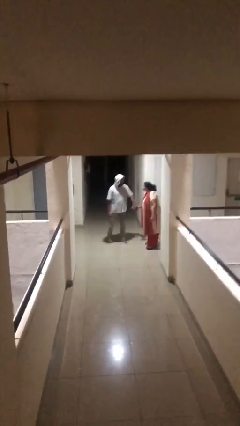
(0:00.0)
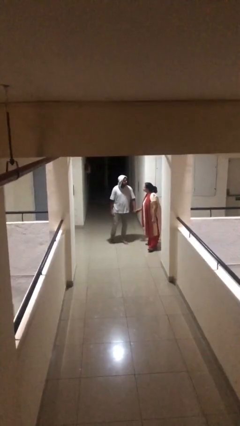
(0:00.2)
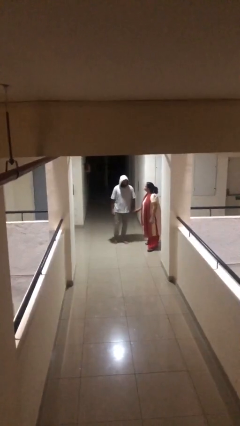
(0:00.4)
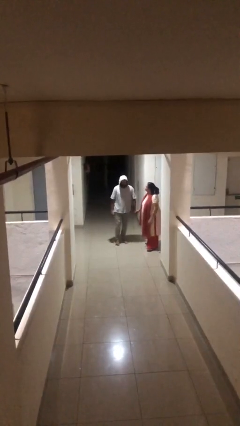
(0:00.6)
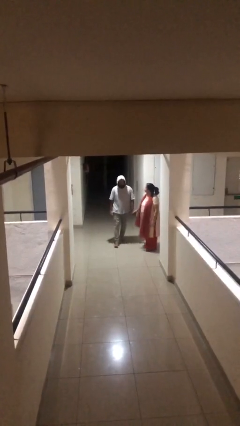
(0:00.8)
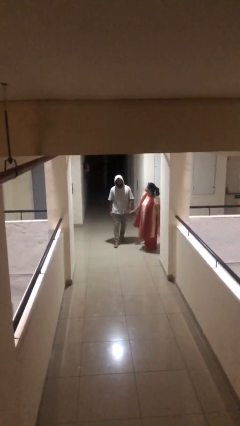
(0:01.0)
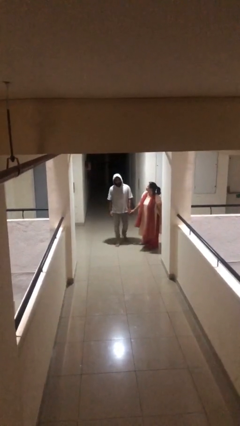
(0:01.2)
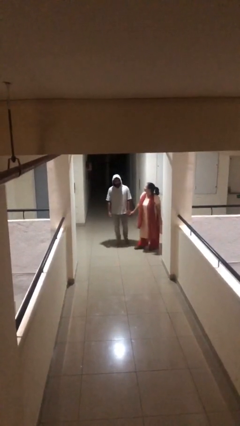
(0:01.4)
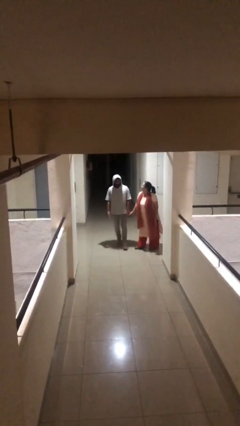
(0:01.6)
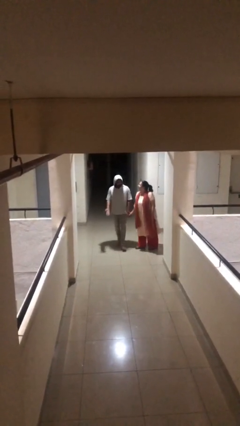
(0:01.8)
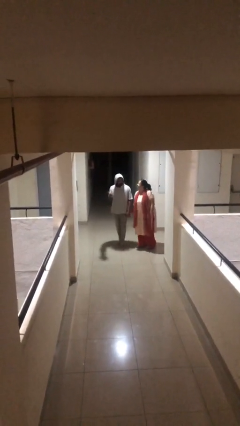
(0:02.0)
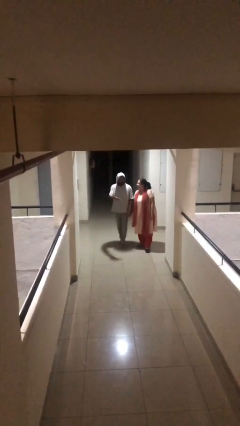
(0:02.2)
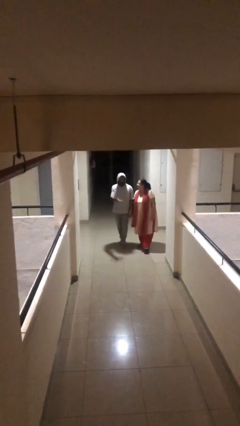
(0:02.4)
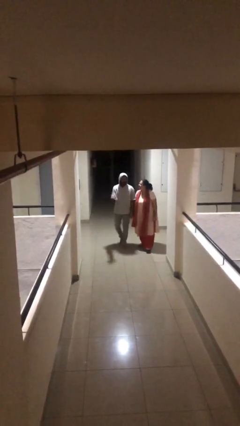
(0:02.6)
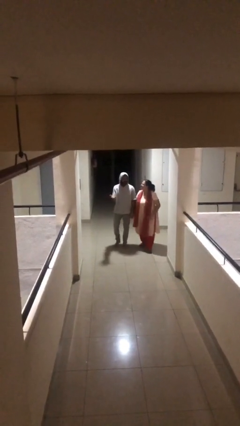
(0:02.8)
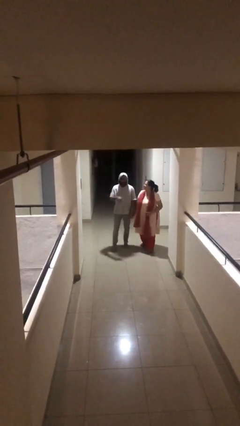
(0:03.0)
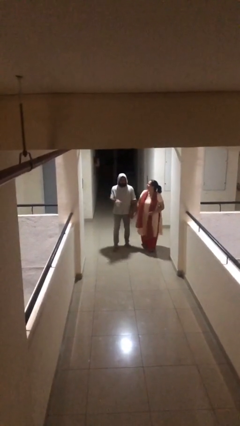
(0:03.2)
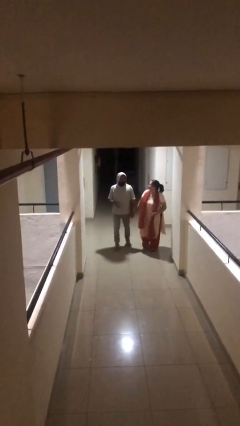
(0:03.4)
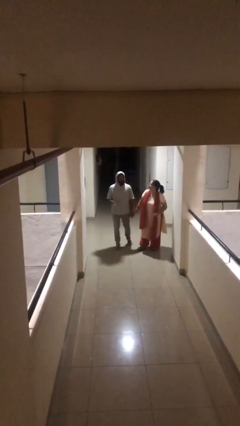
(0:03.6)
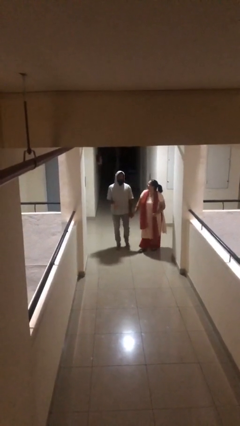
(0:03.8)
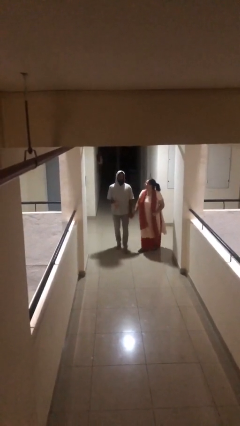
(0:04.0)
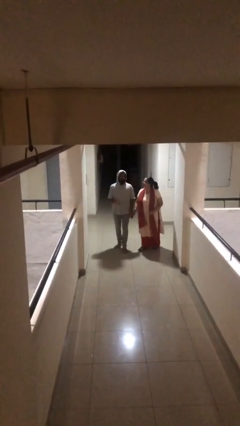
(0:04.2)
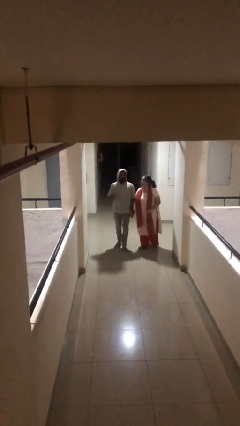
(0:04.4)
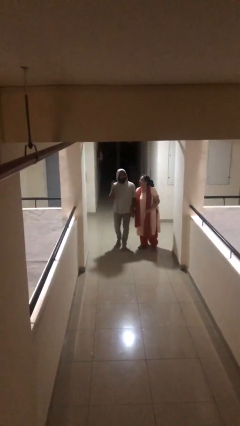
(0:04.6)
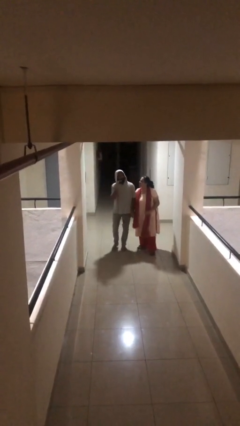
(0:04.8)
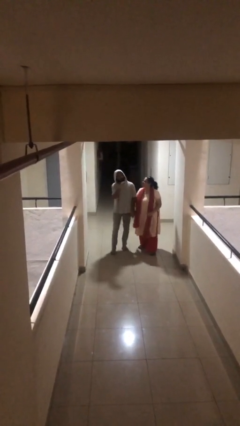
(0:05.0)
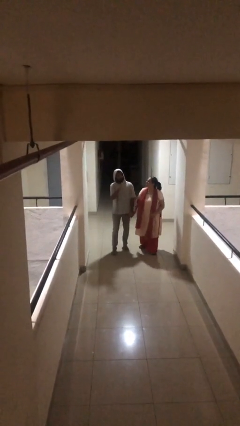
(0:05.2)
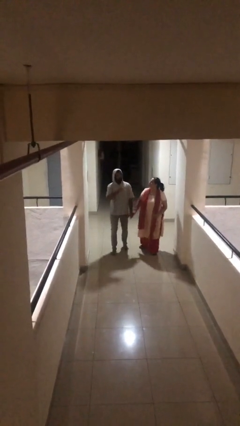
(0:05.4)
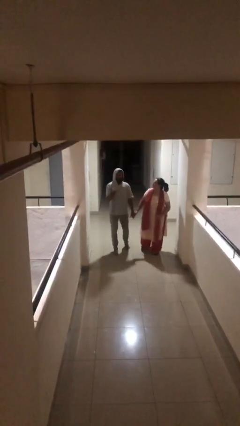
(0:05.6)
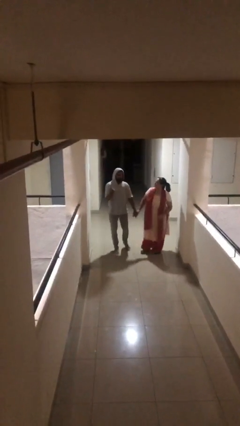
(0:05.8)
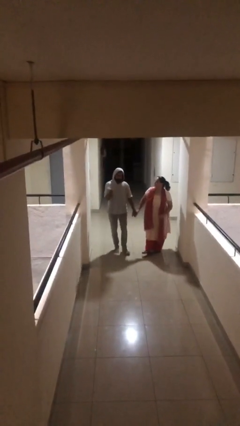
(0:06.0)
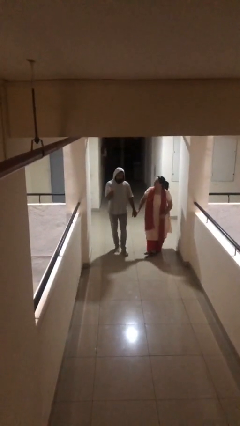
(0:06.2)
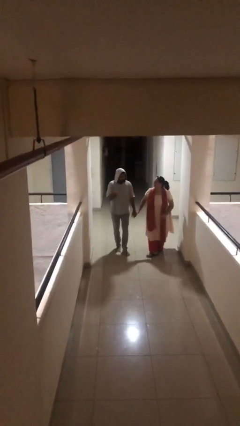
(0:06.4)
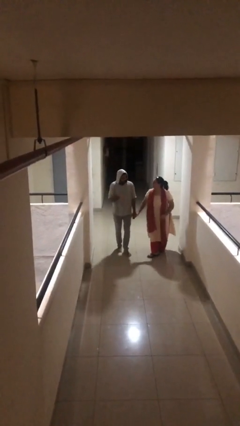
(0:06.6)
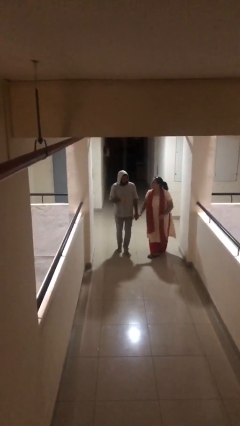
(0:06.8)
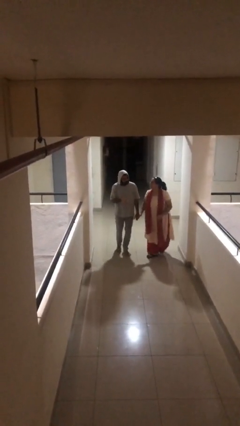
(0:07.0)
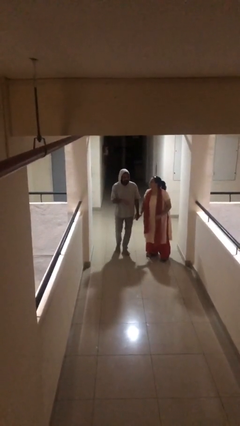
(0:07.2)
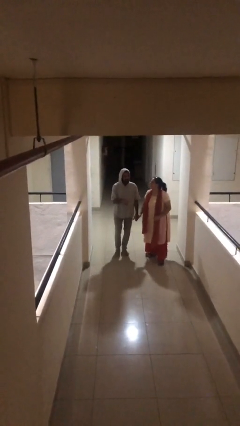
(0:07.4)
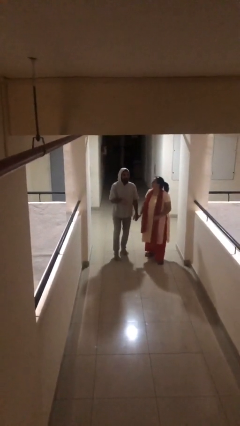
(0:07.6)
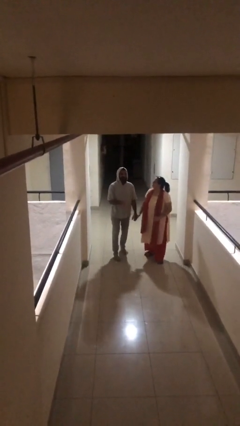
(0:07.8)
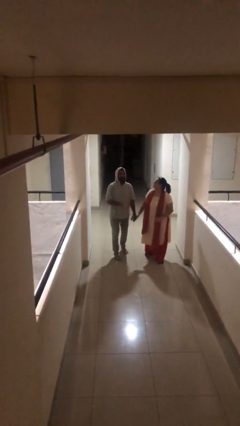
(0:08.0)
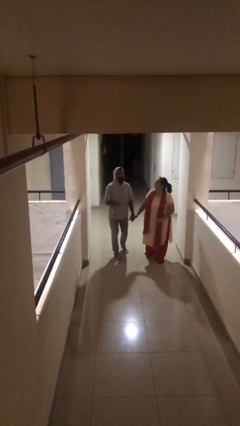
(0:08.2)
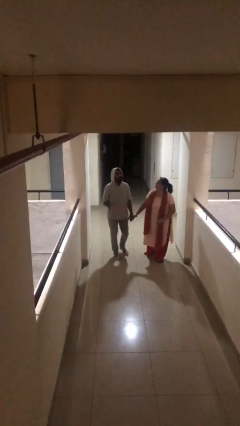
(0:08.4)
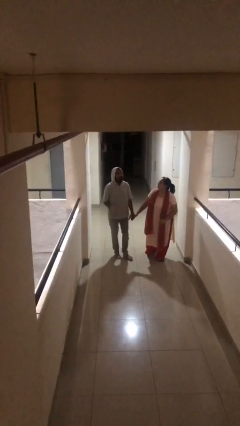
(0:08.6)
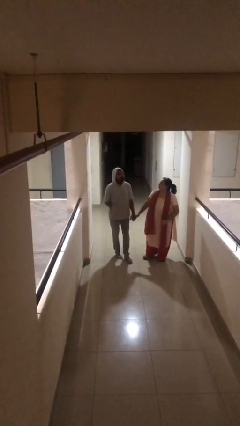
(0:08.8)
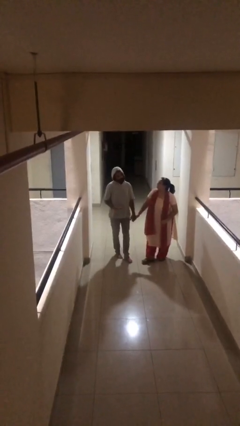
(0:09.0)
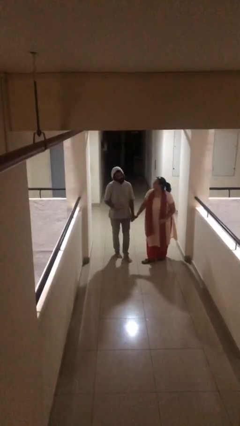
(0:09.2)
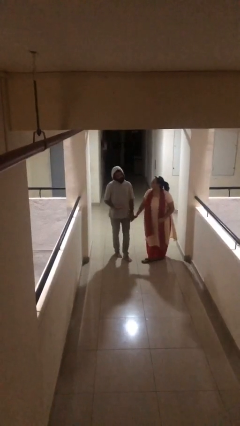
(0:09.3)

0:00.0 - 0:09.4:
person holds hand

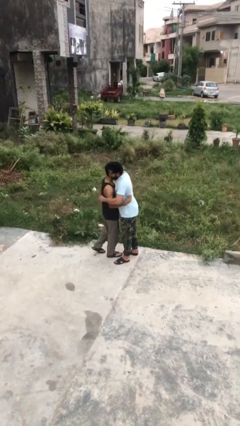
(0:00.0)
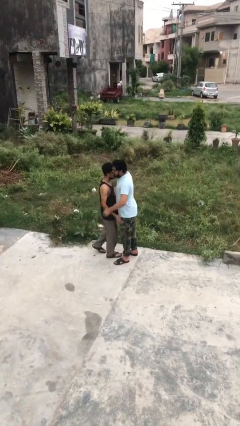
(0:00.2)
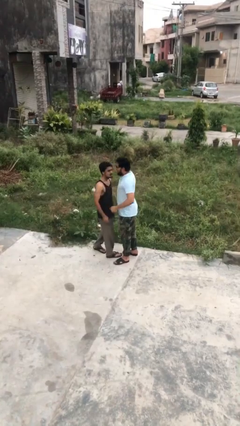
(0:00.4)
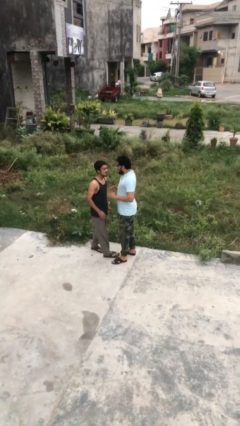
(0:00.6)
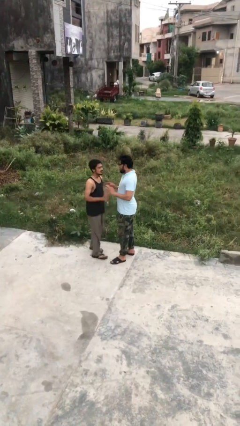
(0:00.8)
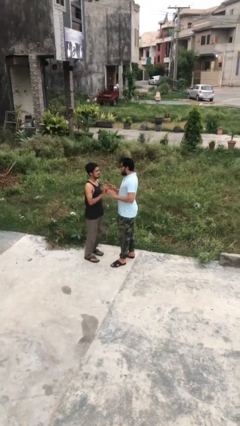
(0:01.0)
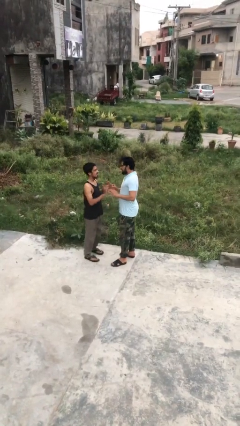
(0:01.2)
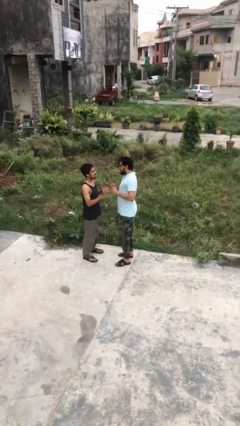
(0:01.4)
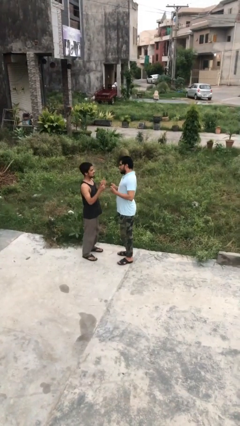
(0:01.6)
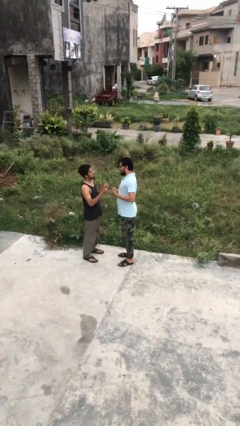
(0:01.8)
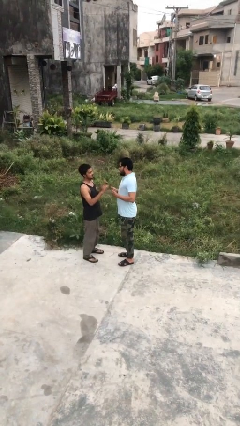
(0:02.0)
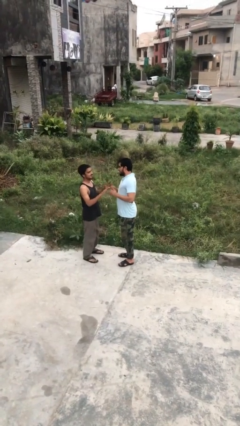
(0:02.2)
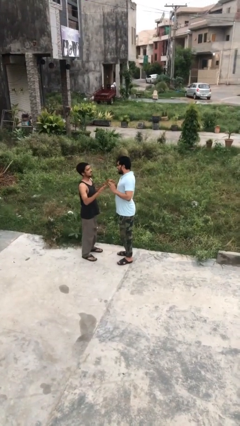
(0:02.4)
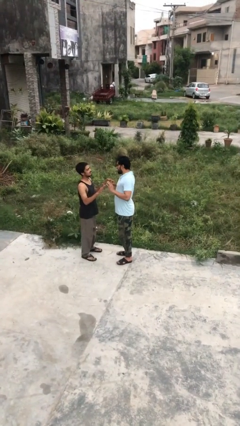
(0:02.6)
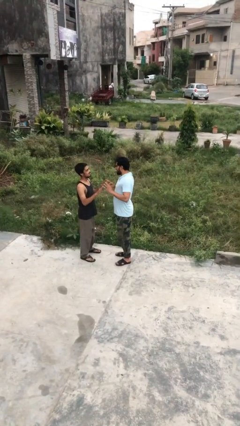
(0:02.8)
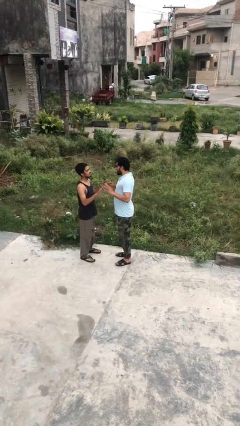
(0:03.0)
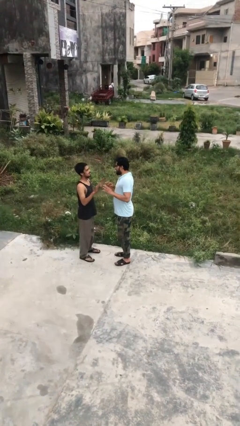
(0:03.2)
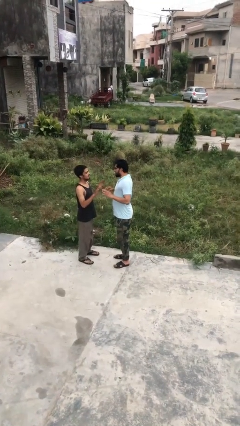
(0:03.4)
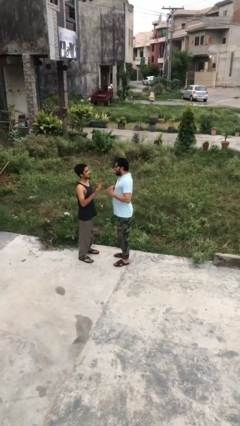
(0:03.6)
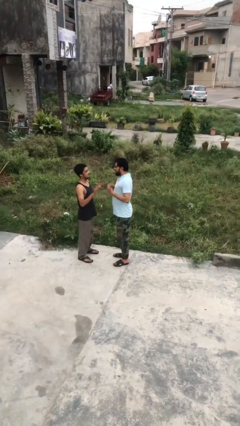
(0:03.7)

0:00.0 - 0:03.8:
person talks to person

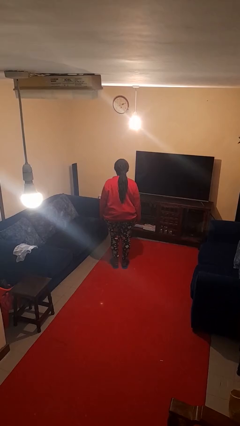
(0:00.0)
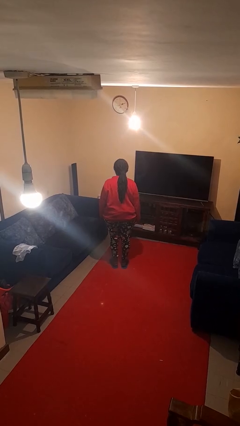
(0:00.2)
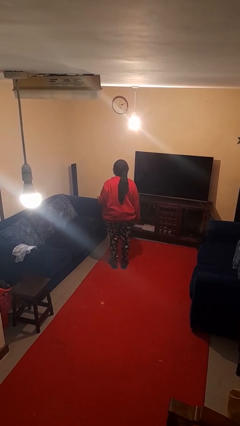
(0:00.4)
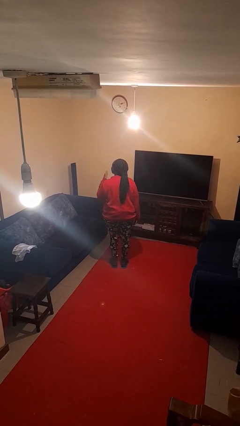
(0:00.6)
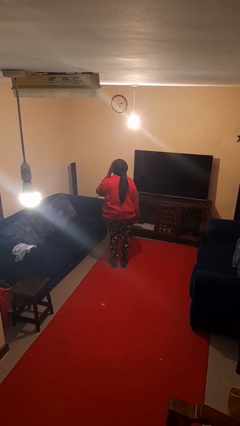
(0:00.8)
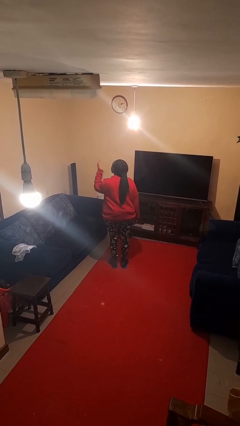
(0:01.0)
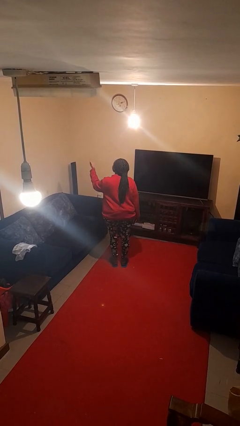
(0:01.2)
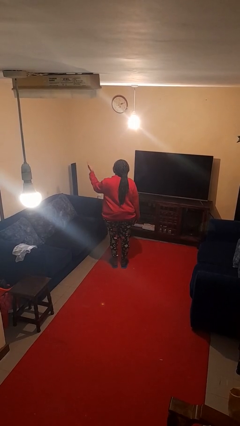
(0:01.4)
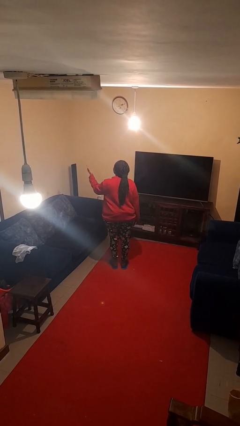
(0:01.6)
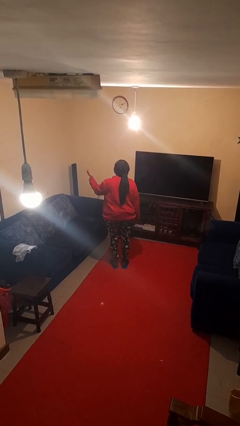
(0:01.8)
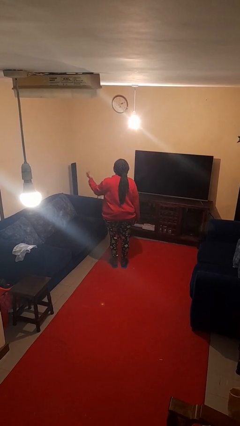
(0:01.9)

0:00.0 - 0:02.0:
person gestures blow kiss

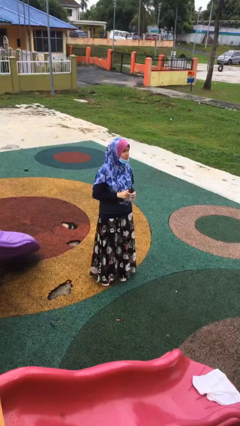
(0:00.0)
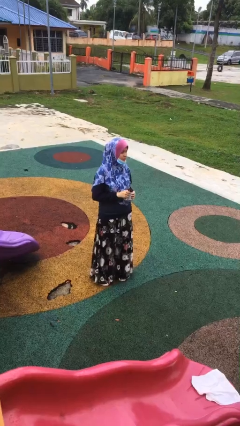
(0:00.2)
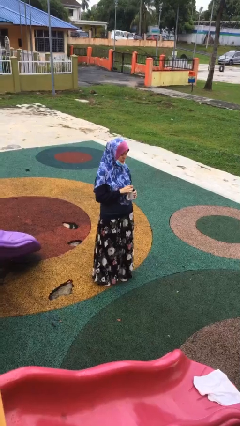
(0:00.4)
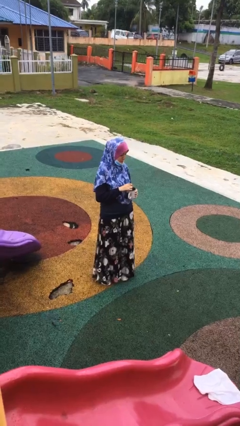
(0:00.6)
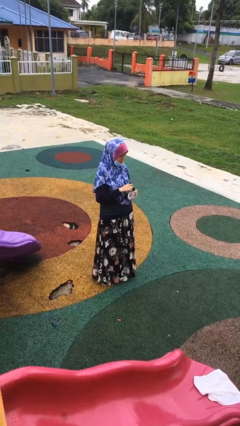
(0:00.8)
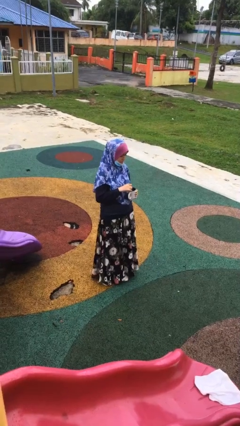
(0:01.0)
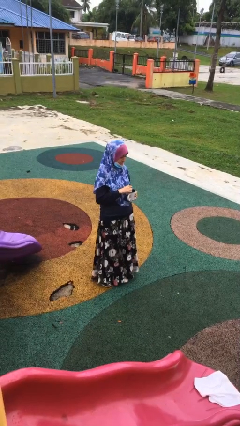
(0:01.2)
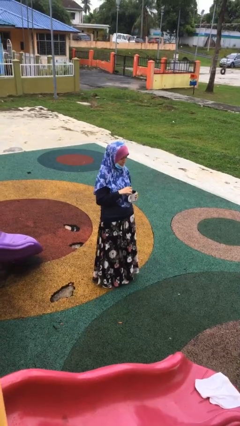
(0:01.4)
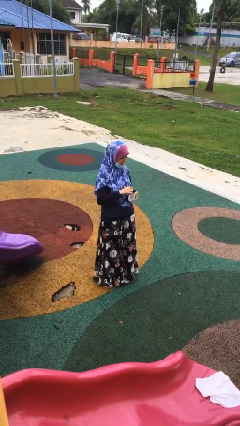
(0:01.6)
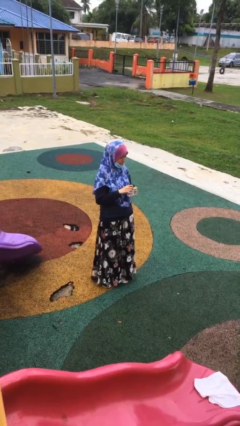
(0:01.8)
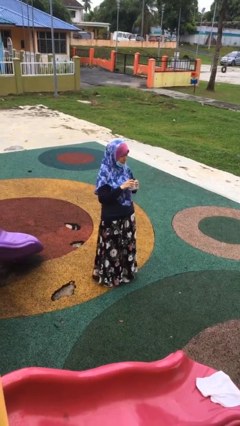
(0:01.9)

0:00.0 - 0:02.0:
person stirs mug

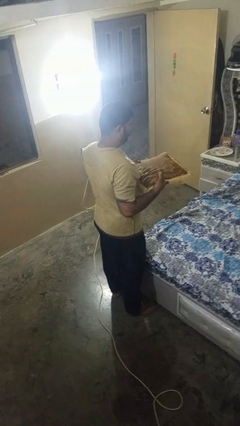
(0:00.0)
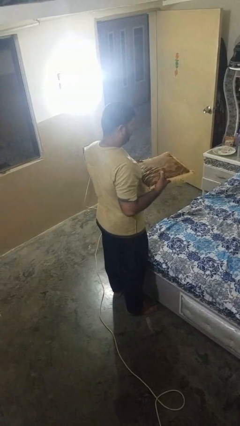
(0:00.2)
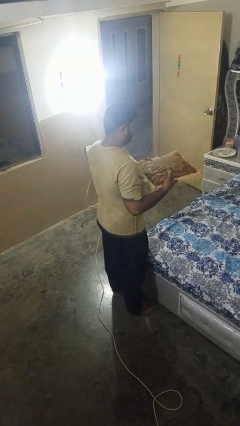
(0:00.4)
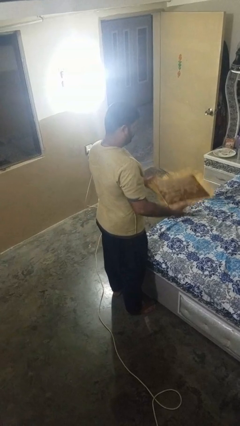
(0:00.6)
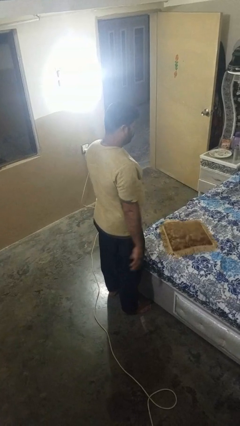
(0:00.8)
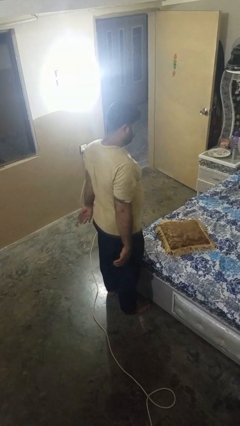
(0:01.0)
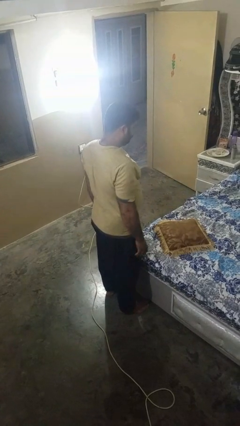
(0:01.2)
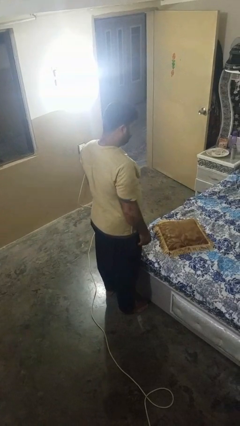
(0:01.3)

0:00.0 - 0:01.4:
person puts down object on bed
